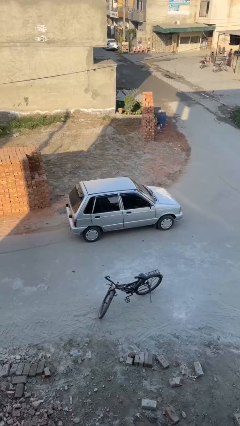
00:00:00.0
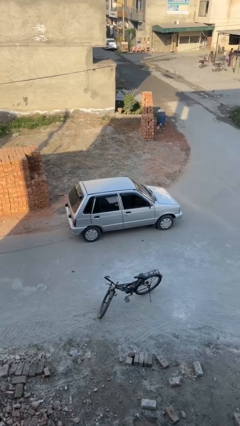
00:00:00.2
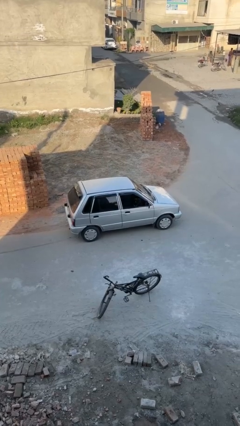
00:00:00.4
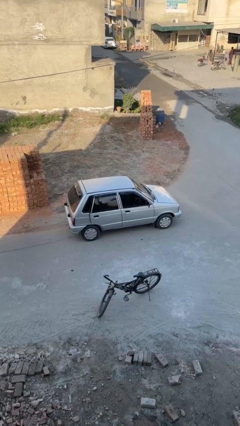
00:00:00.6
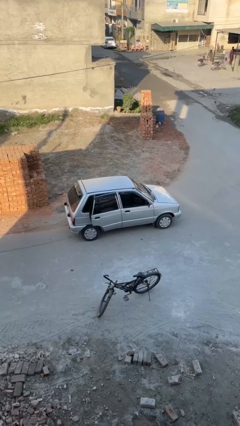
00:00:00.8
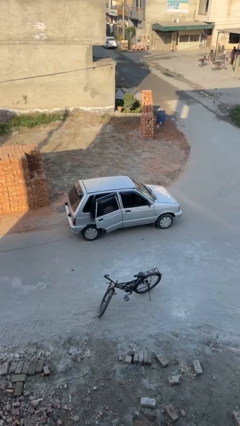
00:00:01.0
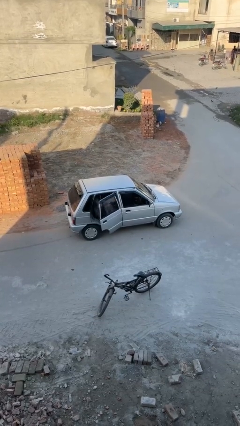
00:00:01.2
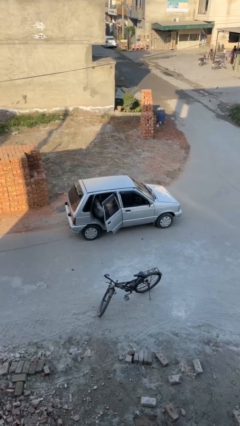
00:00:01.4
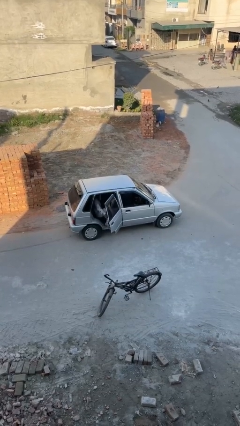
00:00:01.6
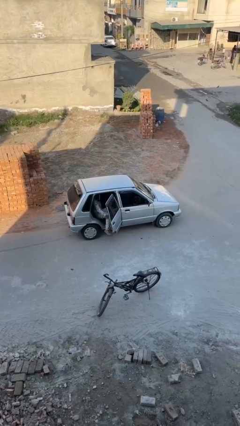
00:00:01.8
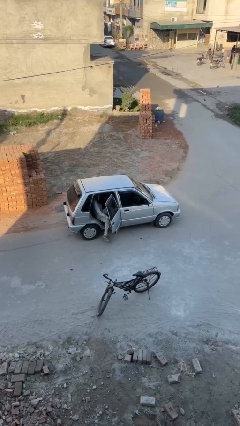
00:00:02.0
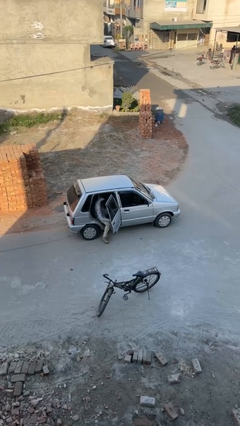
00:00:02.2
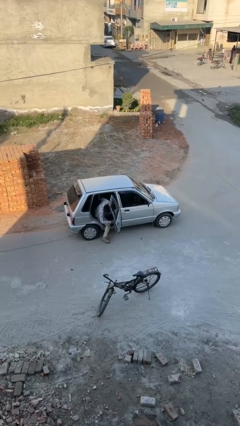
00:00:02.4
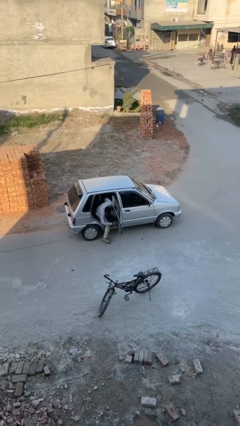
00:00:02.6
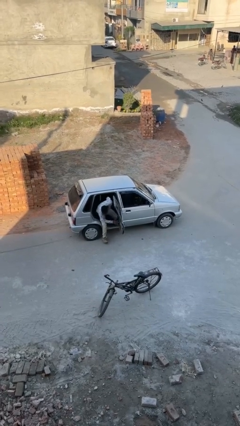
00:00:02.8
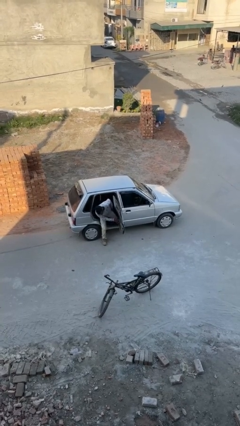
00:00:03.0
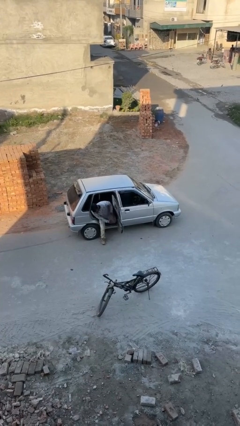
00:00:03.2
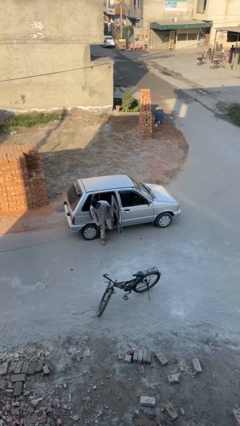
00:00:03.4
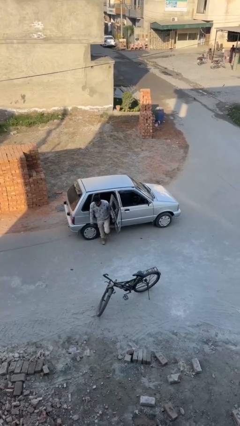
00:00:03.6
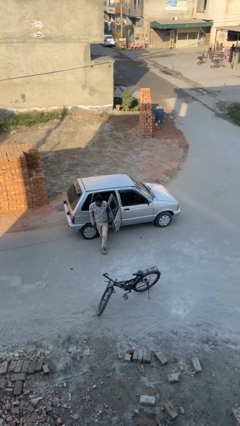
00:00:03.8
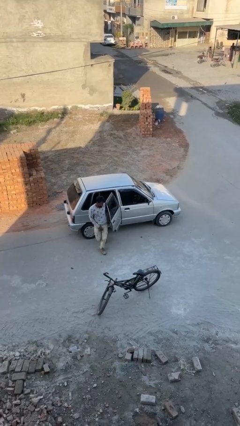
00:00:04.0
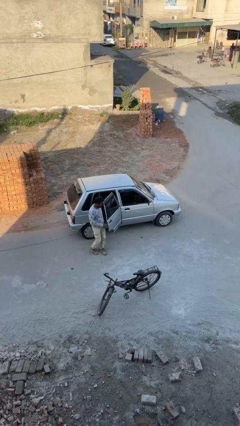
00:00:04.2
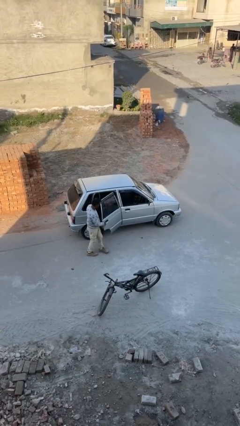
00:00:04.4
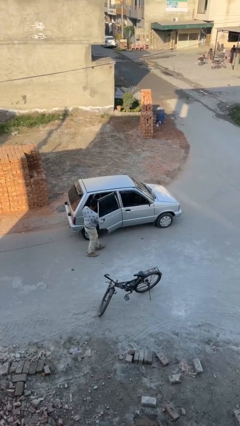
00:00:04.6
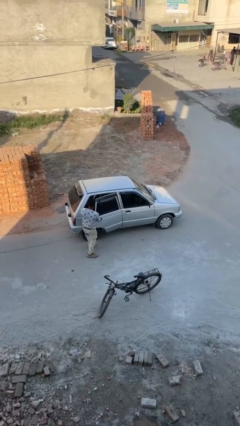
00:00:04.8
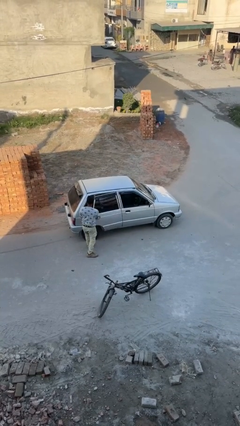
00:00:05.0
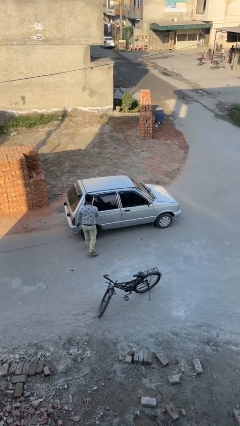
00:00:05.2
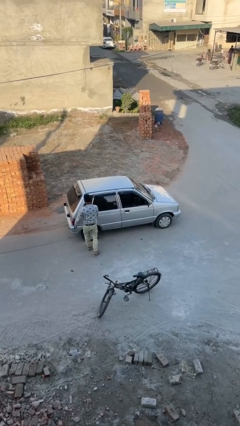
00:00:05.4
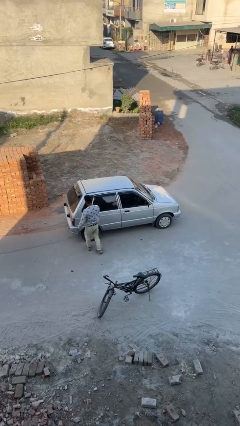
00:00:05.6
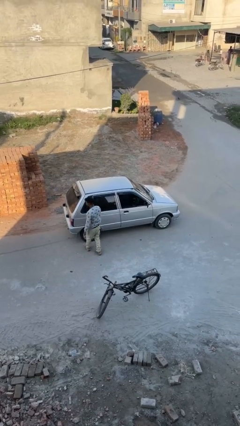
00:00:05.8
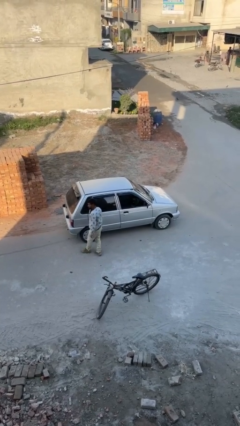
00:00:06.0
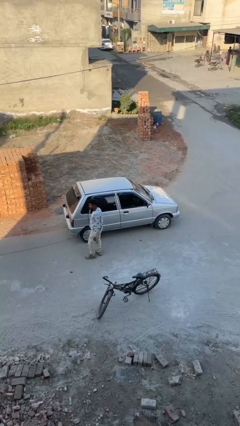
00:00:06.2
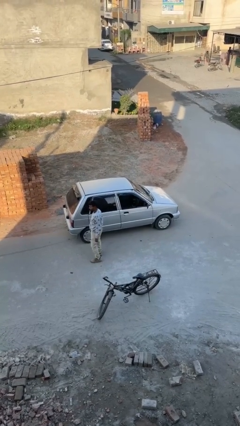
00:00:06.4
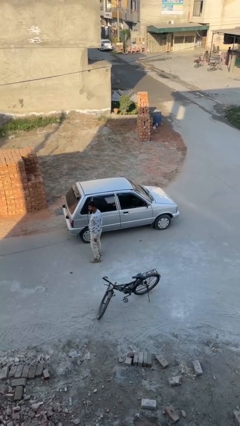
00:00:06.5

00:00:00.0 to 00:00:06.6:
car drops off person

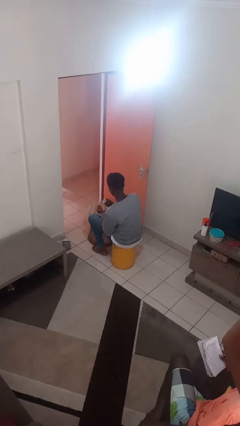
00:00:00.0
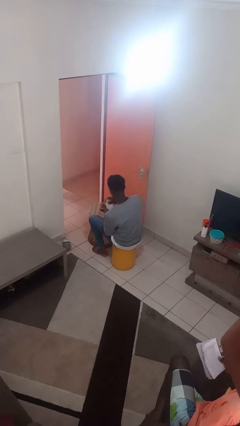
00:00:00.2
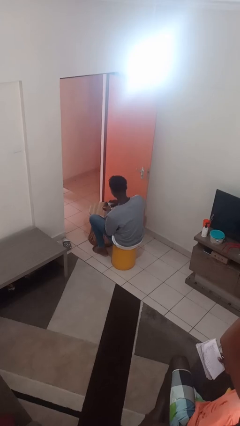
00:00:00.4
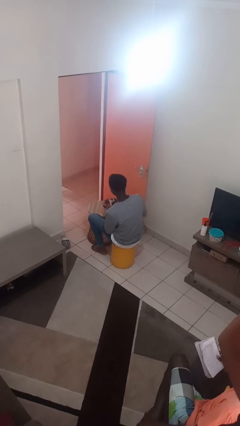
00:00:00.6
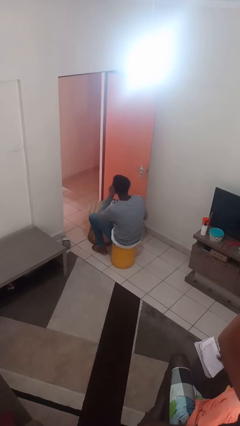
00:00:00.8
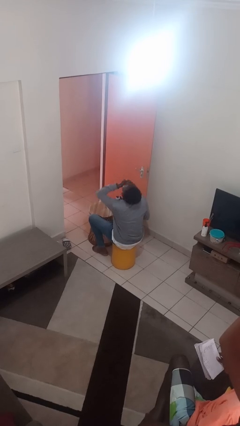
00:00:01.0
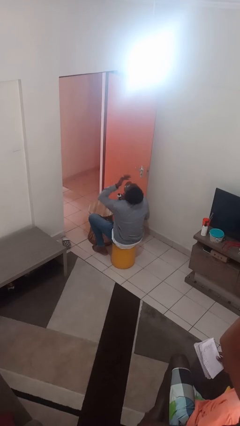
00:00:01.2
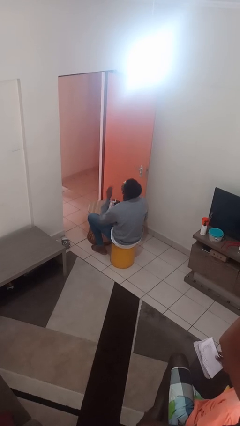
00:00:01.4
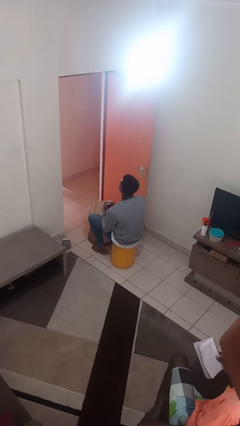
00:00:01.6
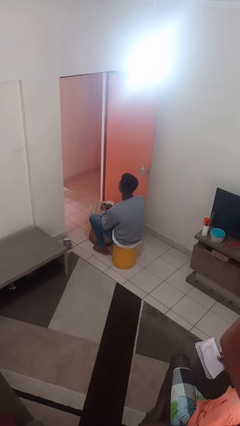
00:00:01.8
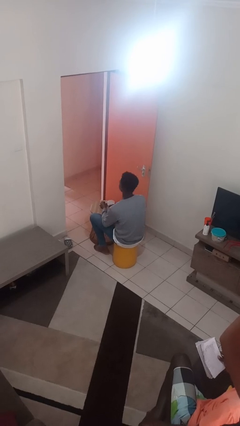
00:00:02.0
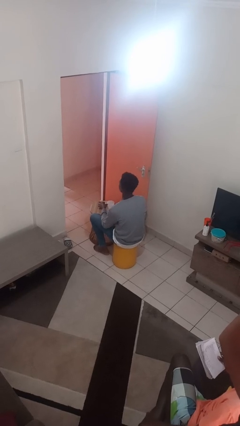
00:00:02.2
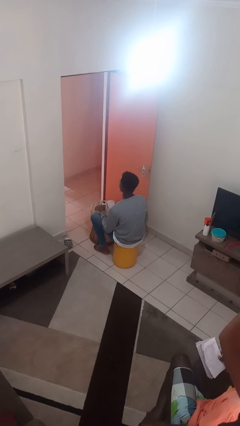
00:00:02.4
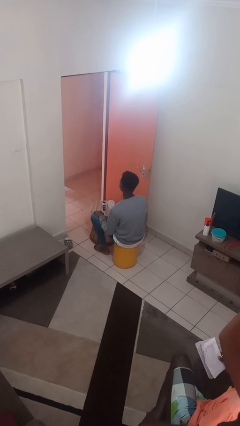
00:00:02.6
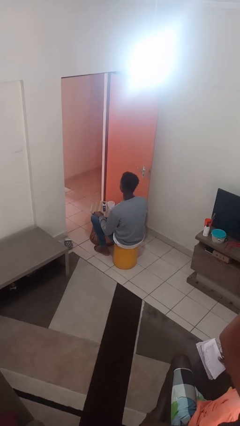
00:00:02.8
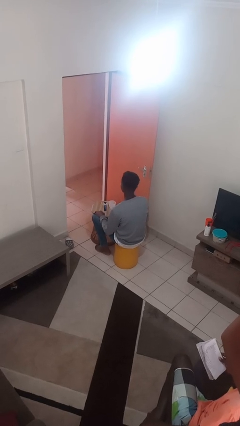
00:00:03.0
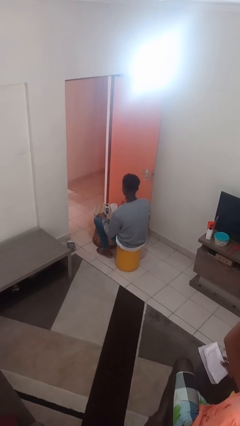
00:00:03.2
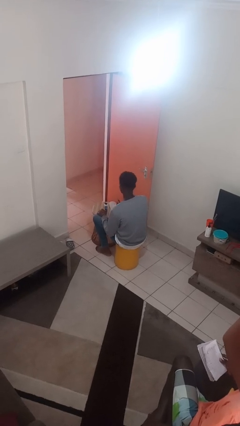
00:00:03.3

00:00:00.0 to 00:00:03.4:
person takes medicine pills

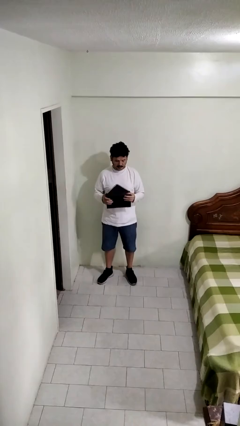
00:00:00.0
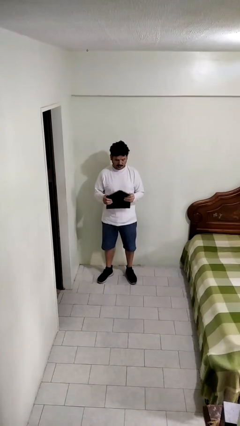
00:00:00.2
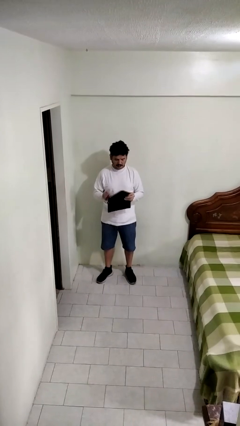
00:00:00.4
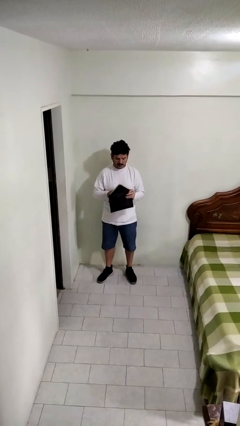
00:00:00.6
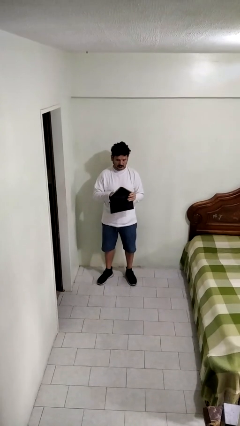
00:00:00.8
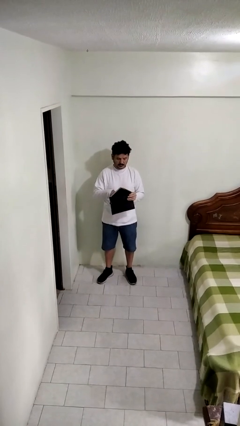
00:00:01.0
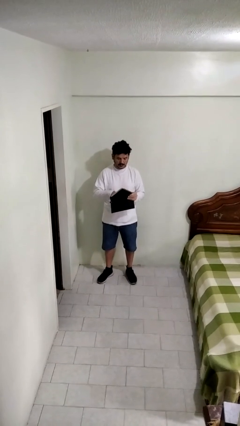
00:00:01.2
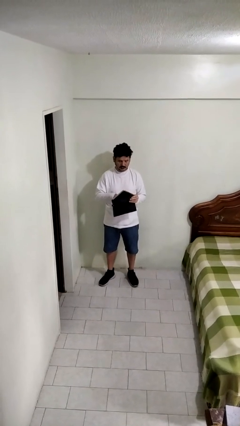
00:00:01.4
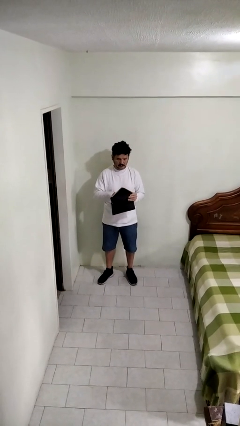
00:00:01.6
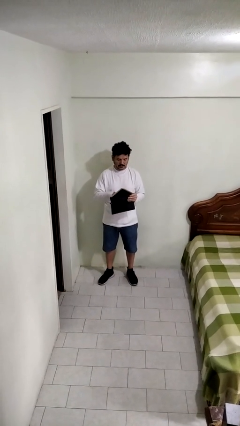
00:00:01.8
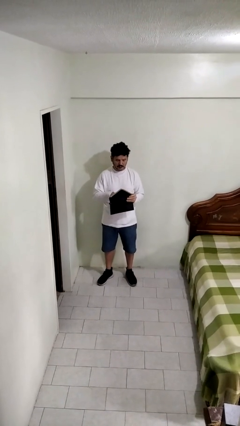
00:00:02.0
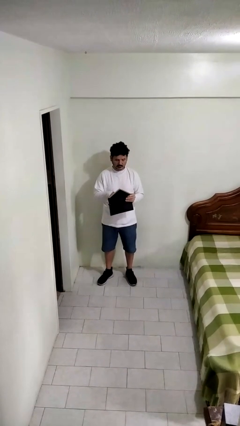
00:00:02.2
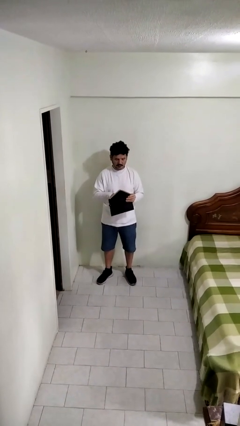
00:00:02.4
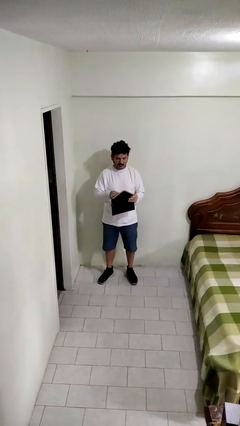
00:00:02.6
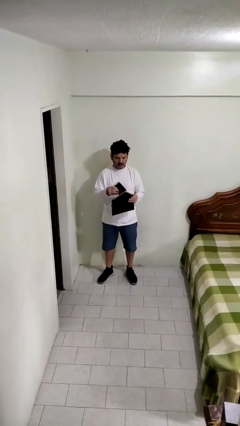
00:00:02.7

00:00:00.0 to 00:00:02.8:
person searches in purse

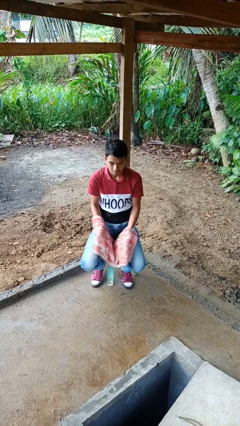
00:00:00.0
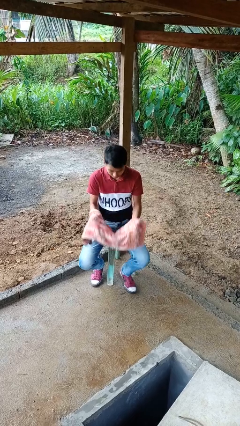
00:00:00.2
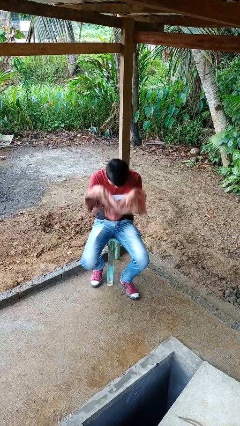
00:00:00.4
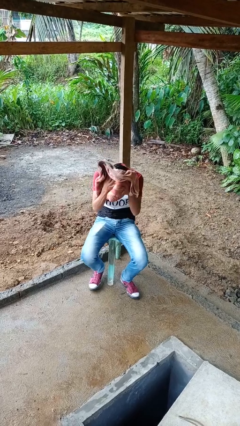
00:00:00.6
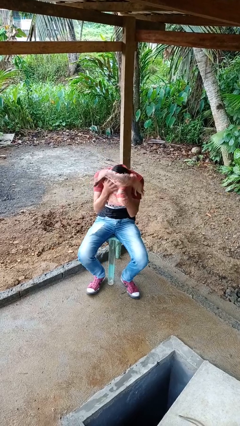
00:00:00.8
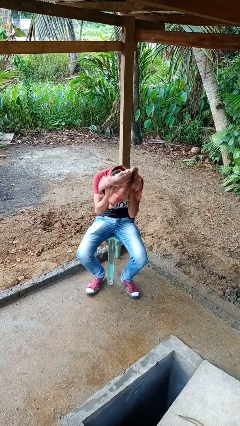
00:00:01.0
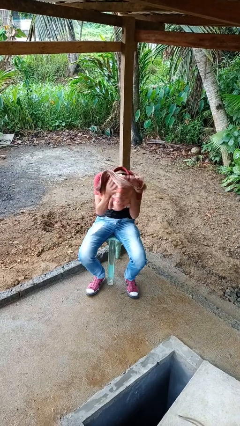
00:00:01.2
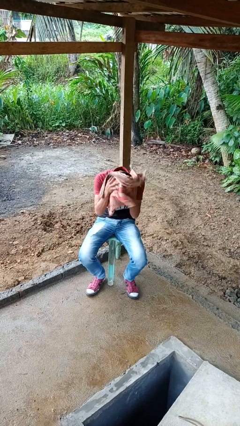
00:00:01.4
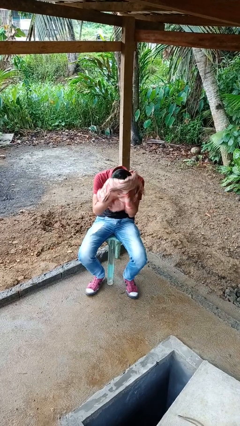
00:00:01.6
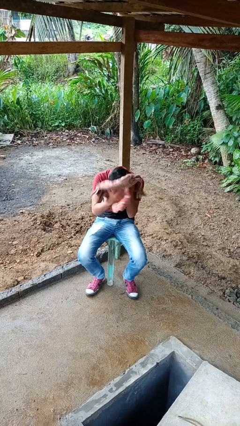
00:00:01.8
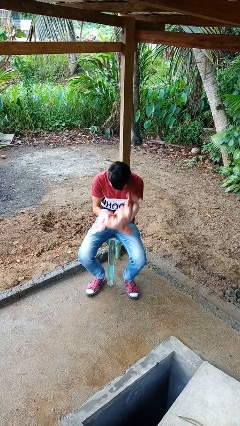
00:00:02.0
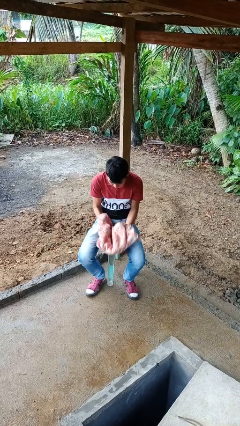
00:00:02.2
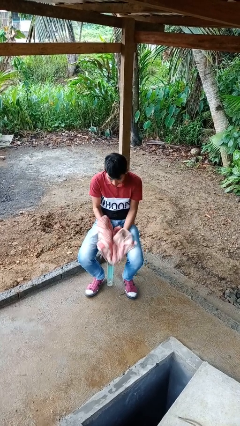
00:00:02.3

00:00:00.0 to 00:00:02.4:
person dries hair with towel

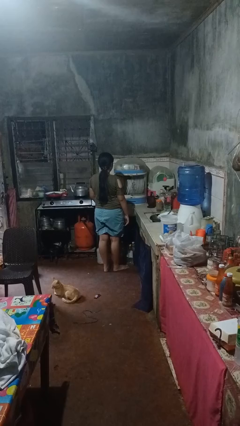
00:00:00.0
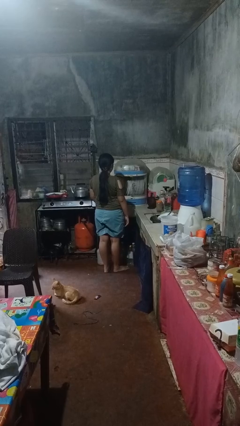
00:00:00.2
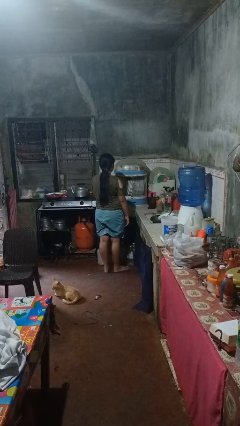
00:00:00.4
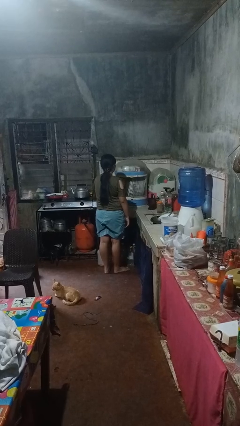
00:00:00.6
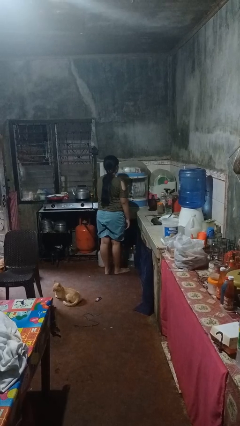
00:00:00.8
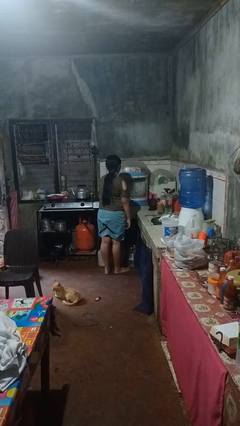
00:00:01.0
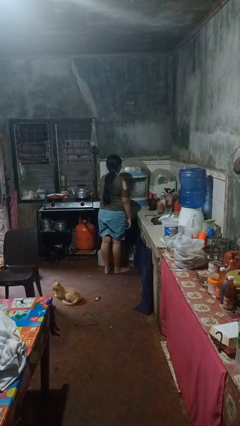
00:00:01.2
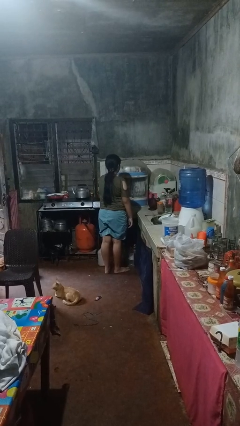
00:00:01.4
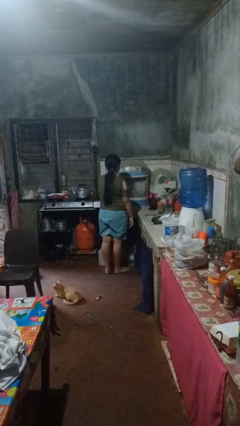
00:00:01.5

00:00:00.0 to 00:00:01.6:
person closes kitchen drawer

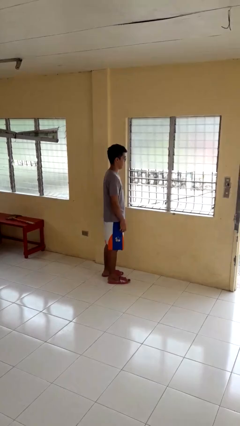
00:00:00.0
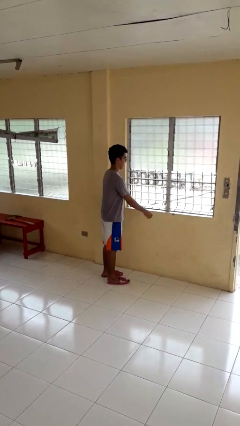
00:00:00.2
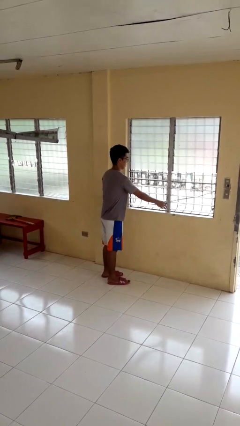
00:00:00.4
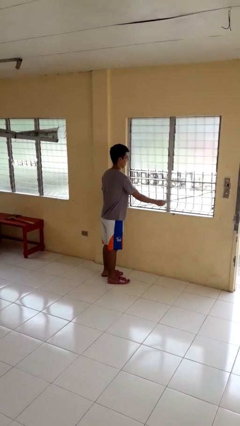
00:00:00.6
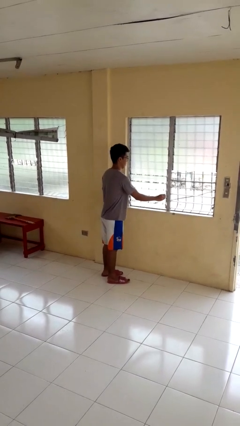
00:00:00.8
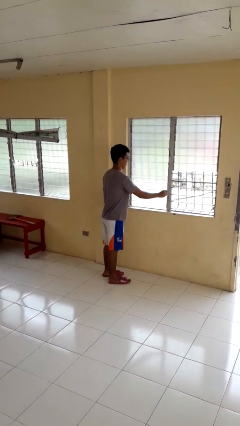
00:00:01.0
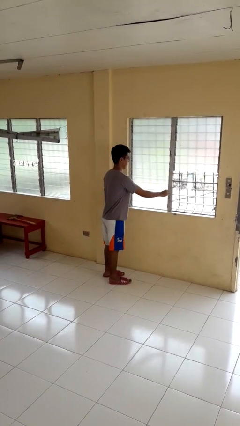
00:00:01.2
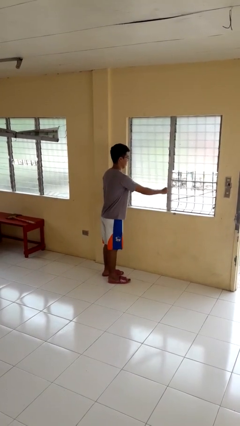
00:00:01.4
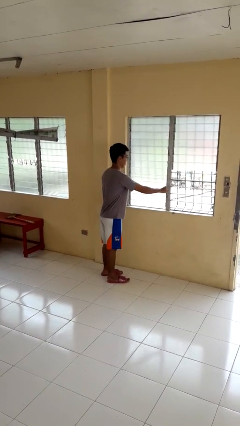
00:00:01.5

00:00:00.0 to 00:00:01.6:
person closes home window
